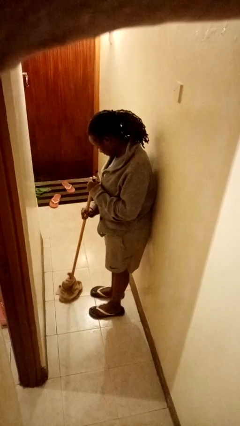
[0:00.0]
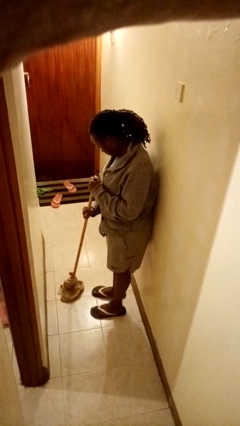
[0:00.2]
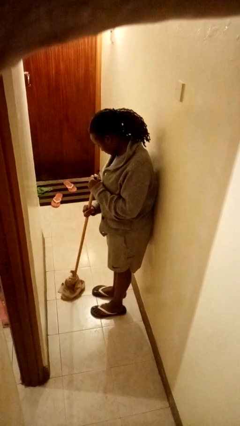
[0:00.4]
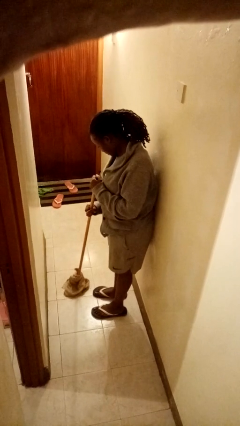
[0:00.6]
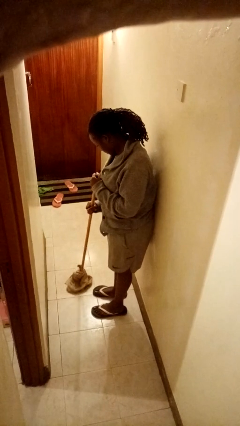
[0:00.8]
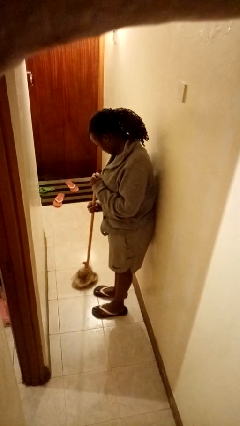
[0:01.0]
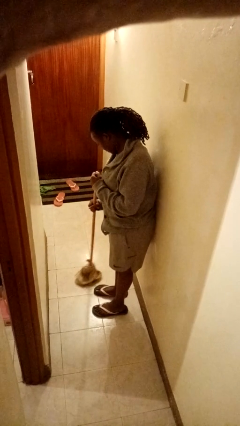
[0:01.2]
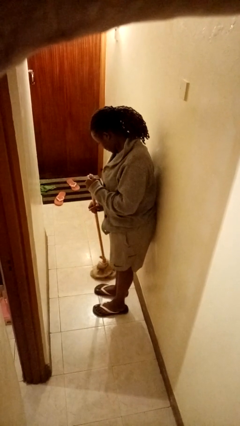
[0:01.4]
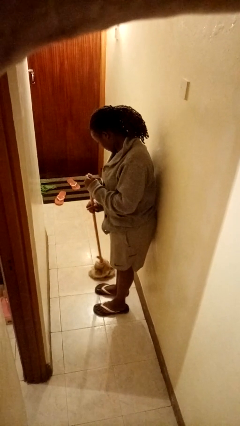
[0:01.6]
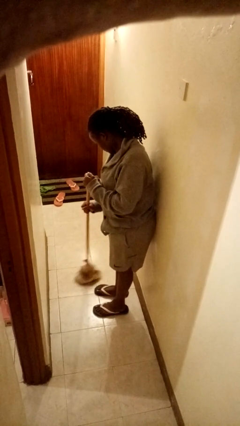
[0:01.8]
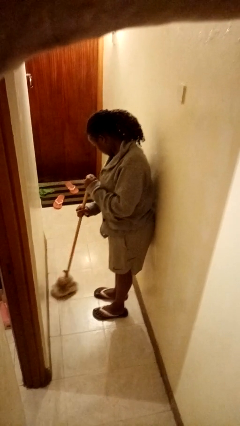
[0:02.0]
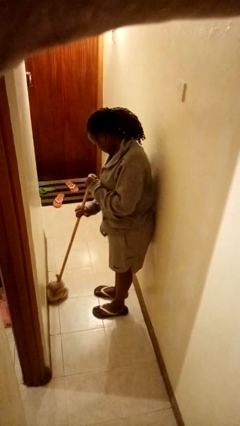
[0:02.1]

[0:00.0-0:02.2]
person mops

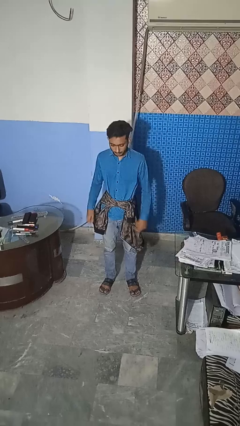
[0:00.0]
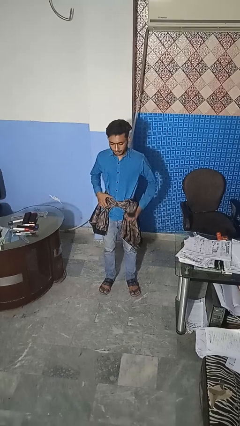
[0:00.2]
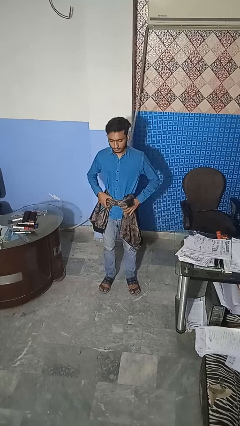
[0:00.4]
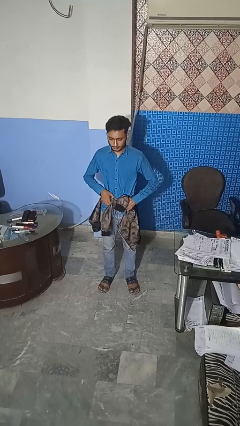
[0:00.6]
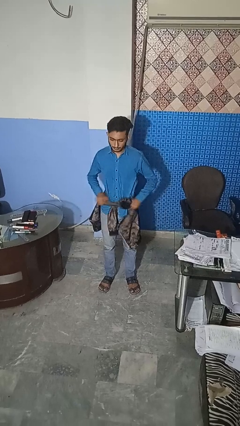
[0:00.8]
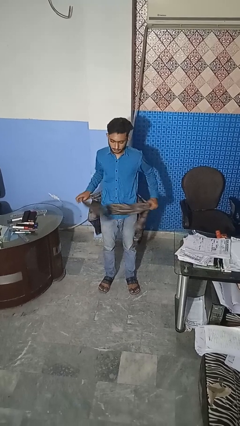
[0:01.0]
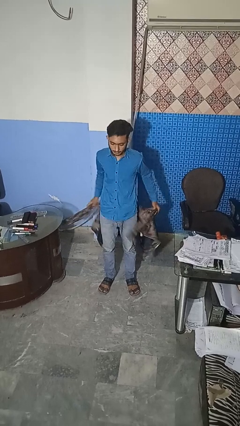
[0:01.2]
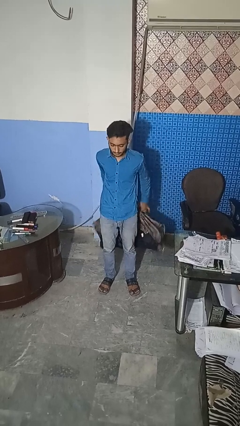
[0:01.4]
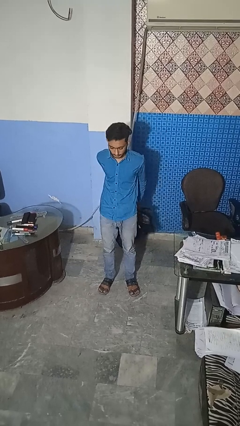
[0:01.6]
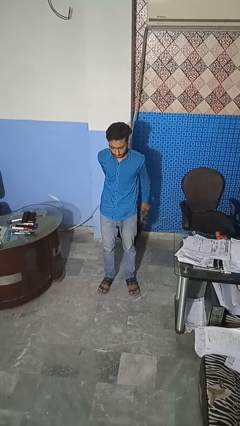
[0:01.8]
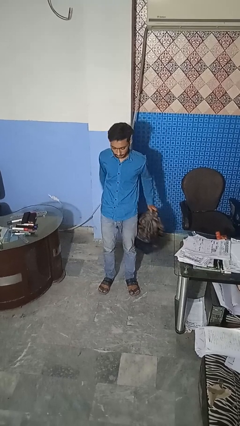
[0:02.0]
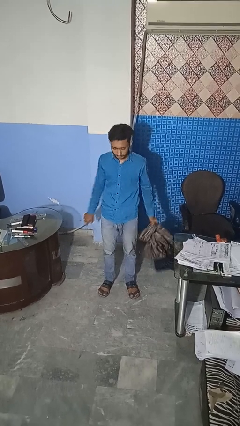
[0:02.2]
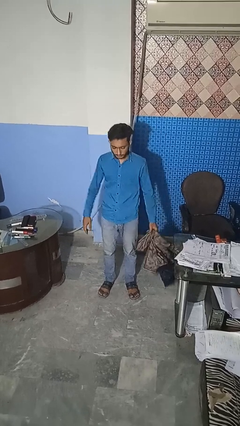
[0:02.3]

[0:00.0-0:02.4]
person unties jacket around waist

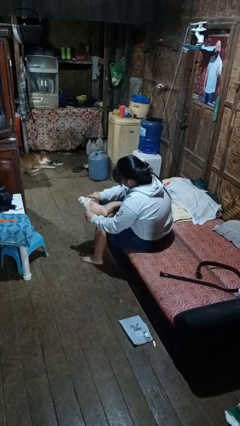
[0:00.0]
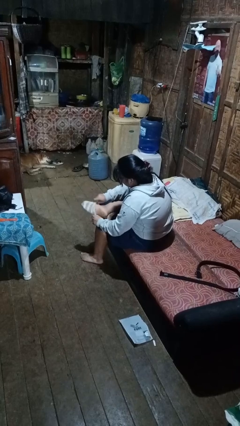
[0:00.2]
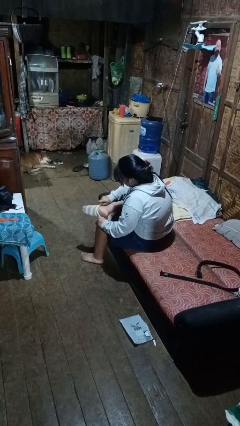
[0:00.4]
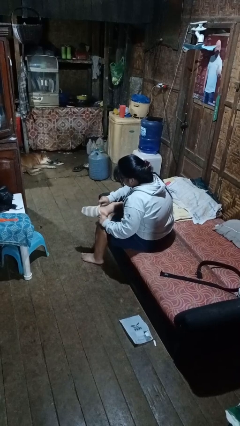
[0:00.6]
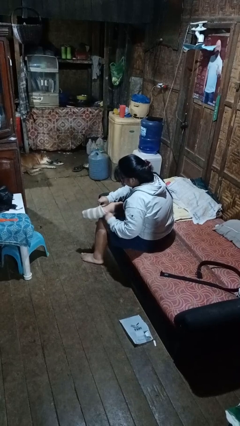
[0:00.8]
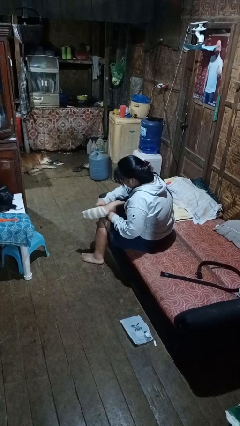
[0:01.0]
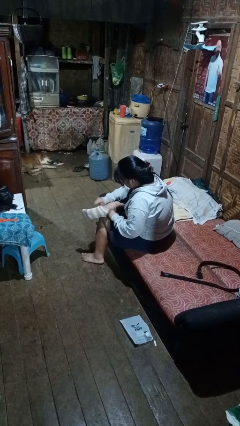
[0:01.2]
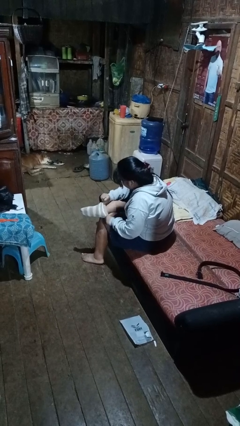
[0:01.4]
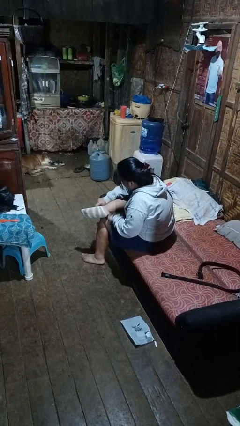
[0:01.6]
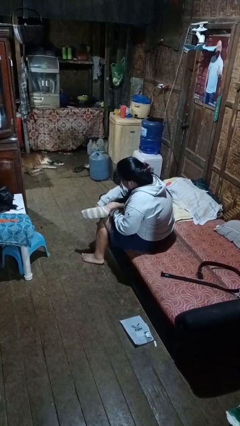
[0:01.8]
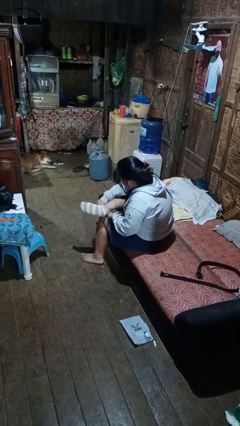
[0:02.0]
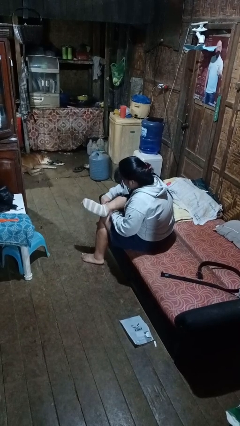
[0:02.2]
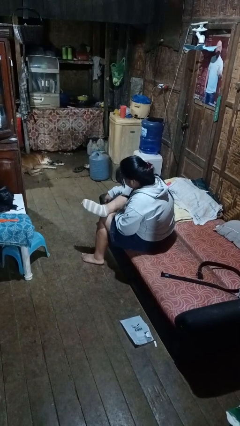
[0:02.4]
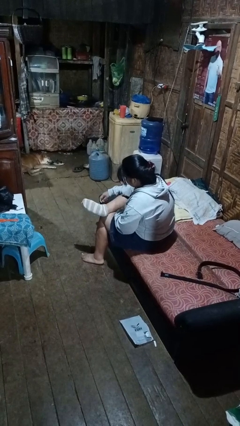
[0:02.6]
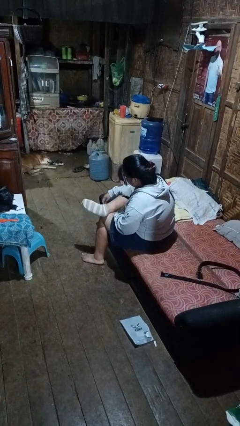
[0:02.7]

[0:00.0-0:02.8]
person puts on socks

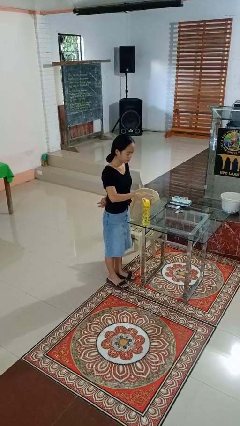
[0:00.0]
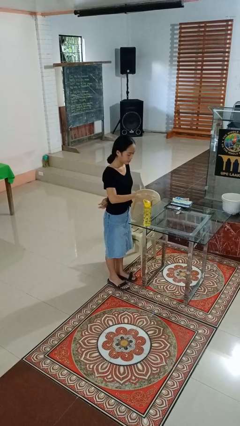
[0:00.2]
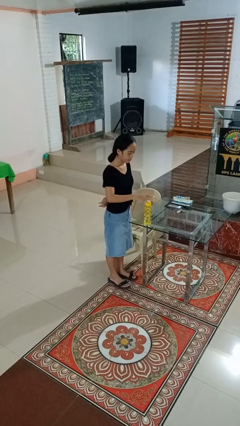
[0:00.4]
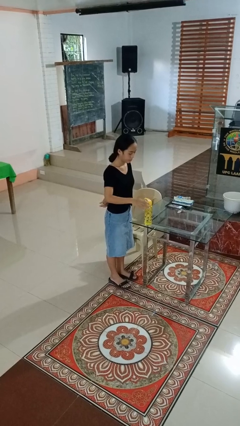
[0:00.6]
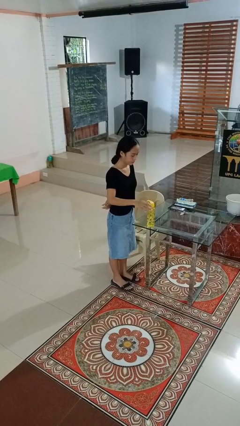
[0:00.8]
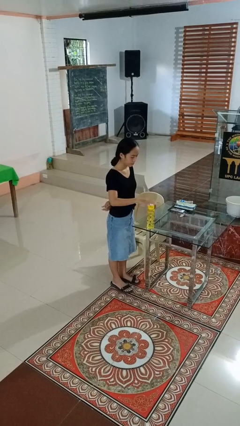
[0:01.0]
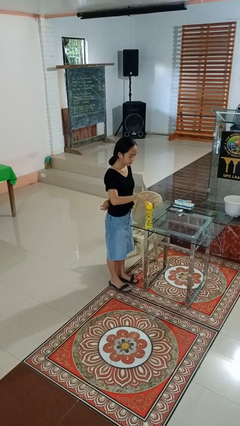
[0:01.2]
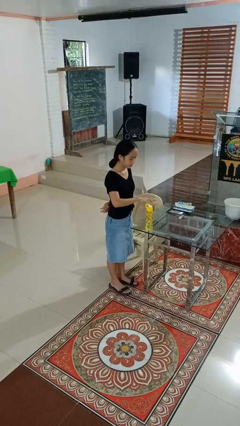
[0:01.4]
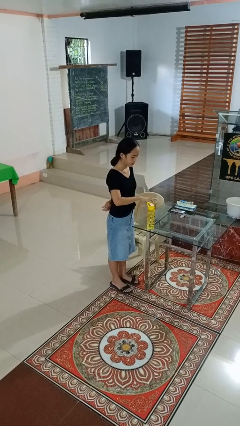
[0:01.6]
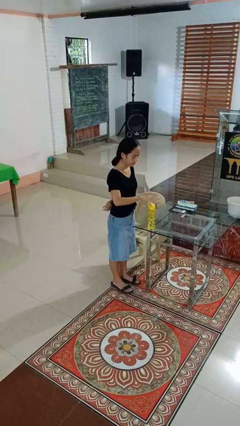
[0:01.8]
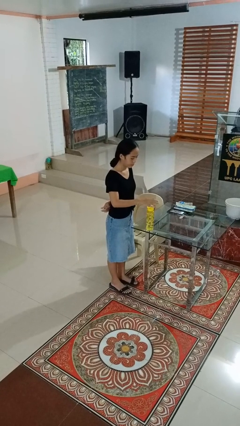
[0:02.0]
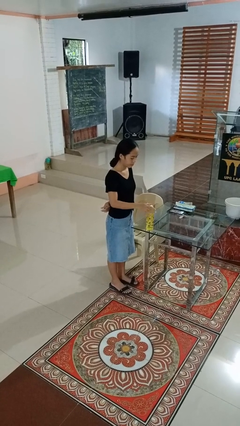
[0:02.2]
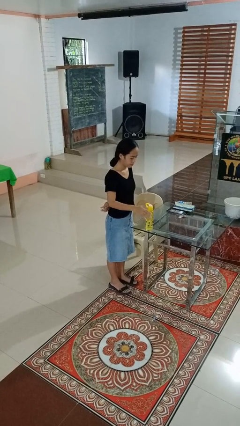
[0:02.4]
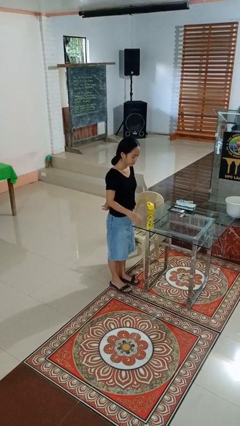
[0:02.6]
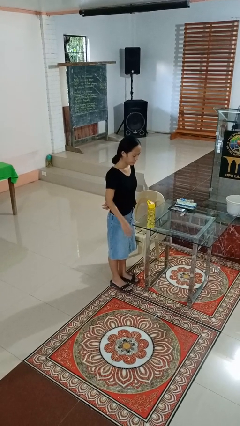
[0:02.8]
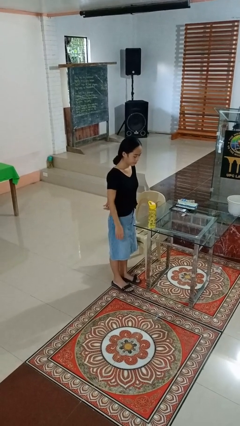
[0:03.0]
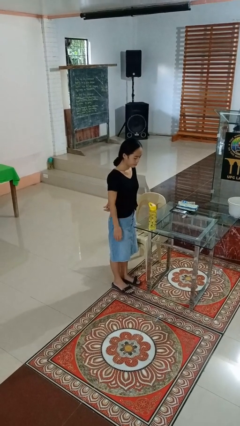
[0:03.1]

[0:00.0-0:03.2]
person waves hand over object

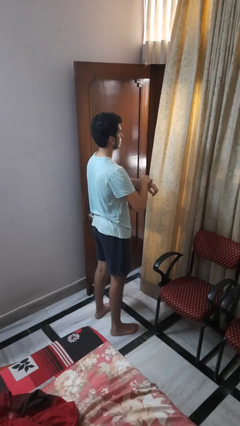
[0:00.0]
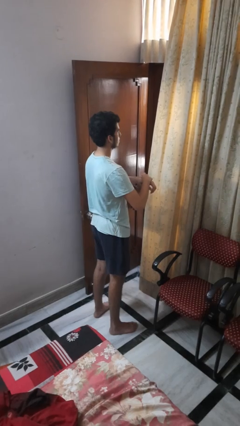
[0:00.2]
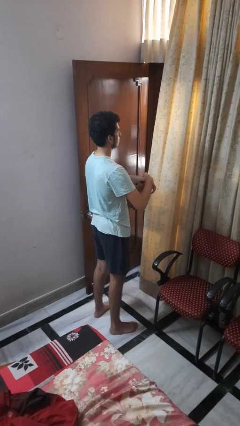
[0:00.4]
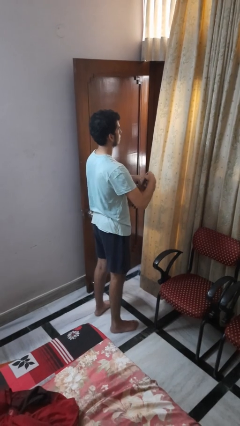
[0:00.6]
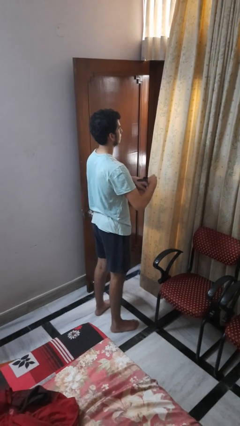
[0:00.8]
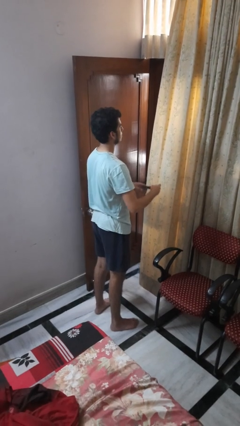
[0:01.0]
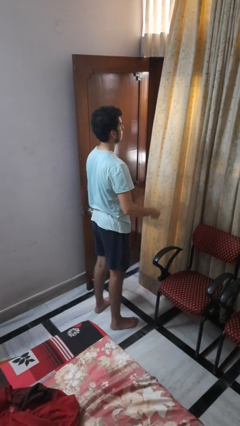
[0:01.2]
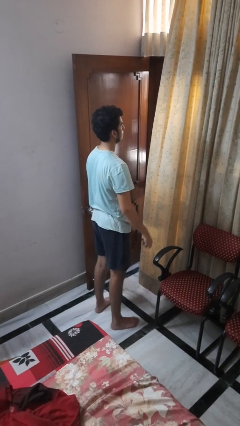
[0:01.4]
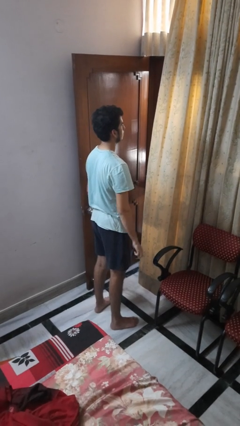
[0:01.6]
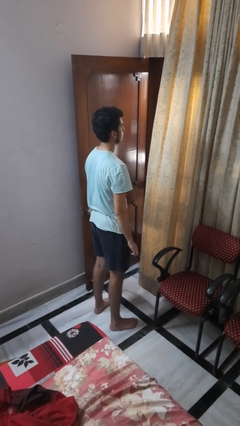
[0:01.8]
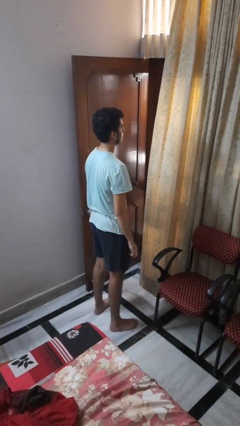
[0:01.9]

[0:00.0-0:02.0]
person takes off wristwatch

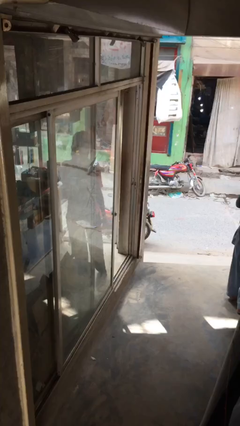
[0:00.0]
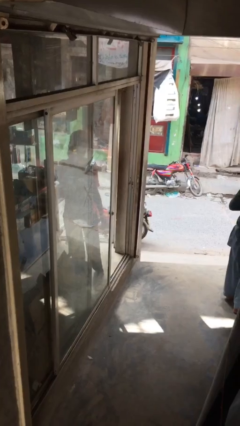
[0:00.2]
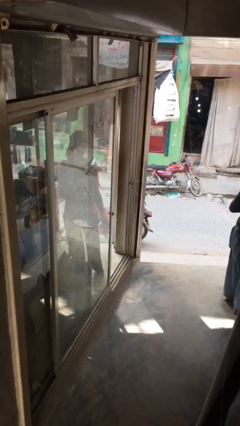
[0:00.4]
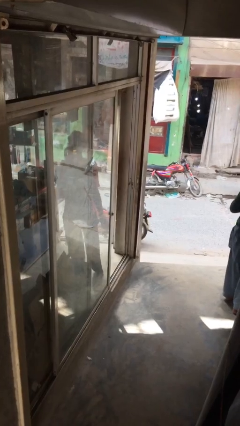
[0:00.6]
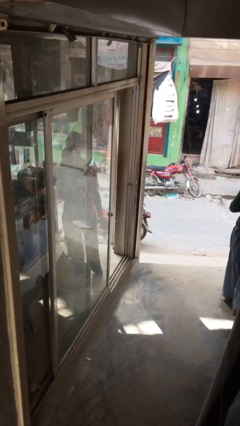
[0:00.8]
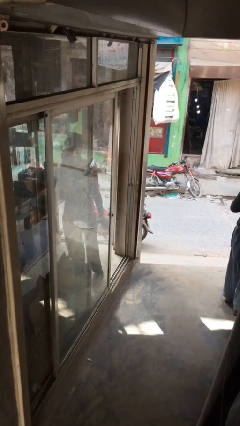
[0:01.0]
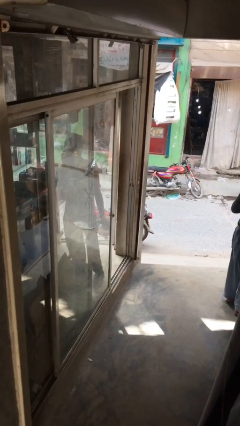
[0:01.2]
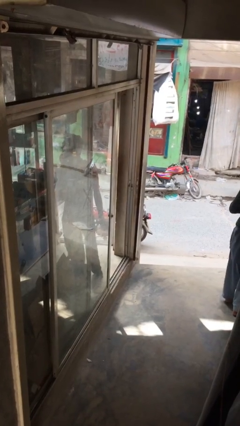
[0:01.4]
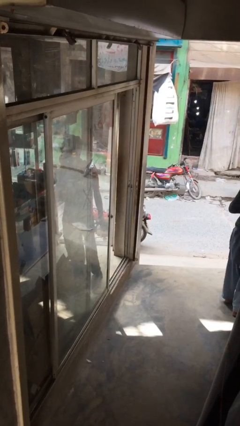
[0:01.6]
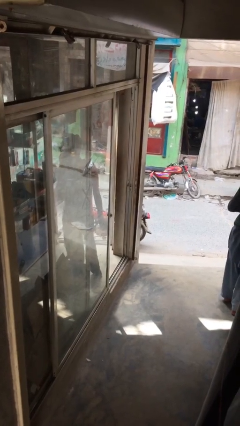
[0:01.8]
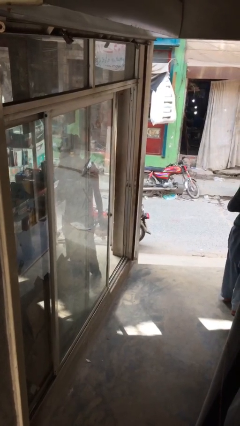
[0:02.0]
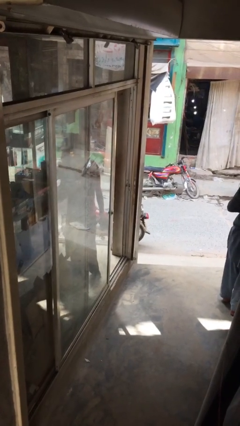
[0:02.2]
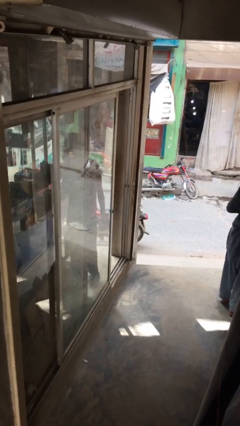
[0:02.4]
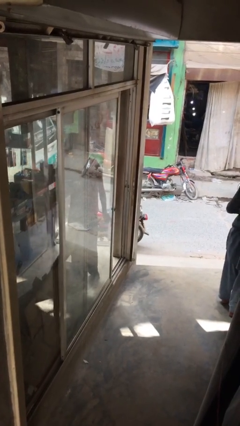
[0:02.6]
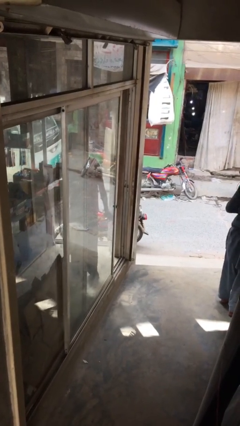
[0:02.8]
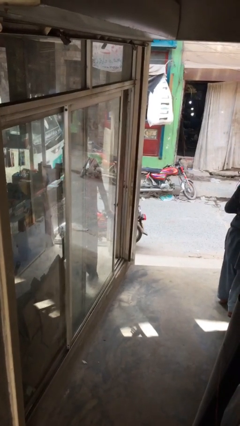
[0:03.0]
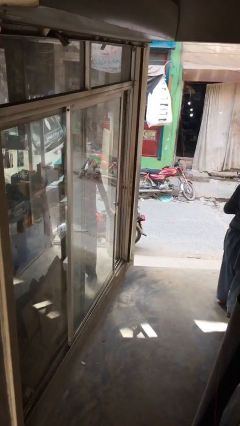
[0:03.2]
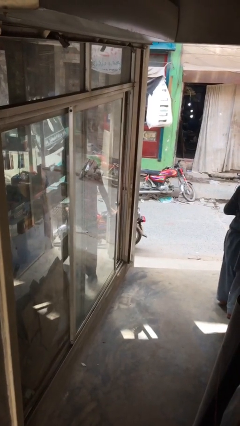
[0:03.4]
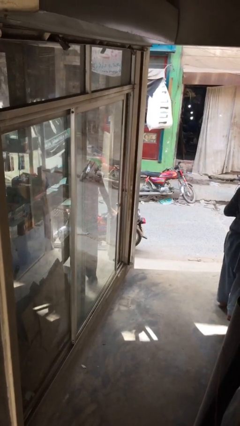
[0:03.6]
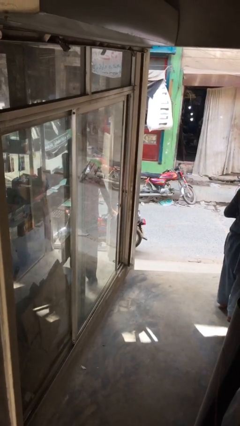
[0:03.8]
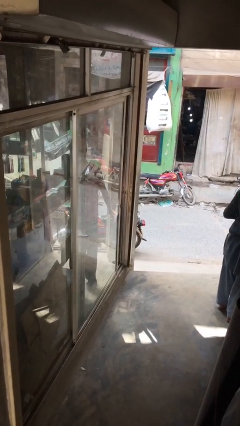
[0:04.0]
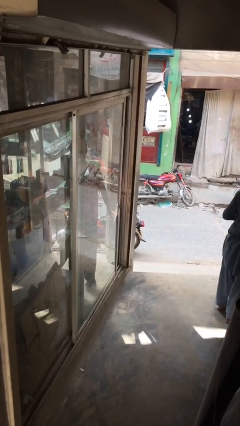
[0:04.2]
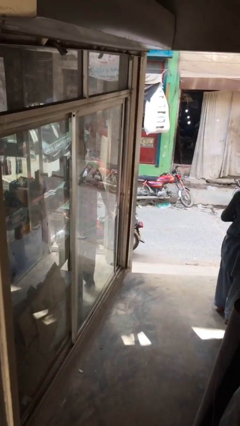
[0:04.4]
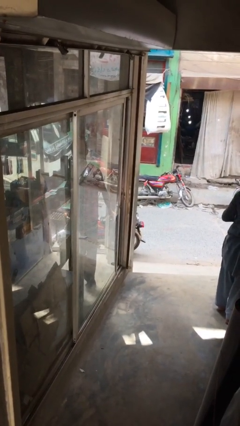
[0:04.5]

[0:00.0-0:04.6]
person closes facility door
